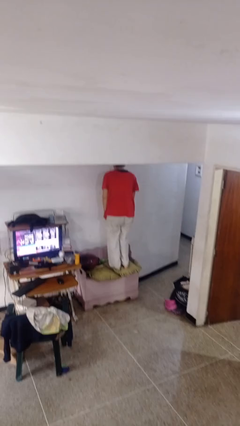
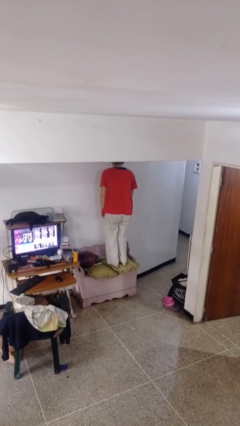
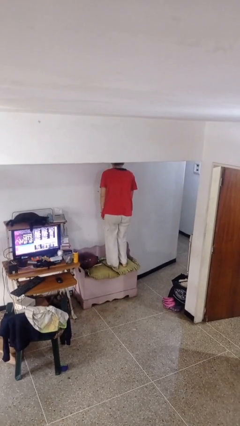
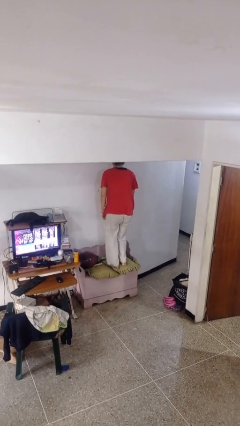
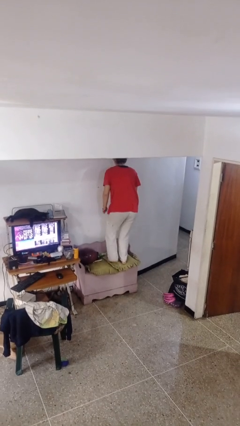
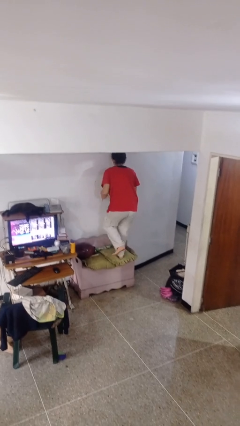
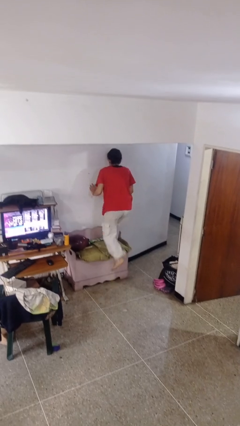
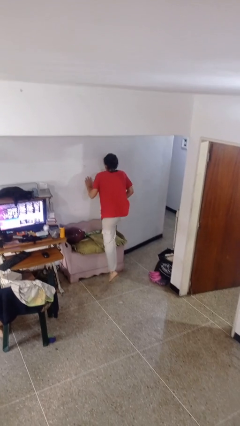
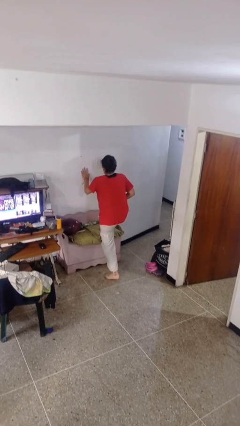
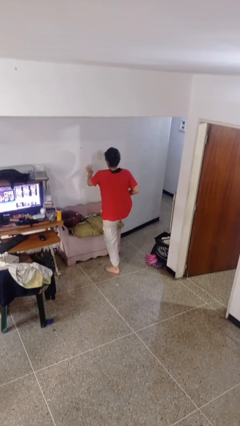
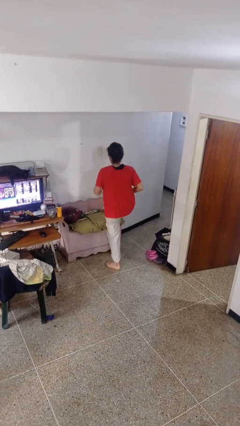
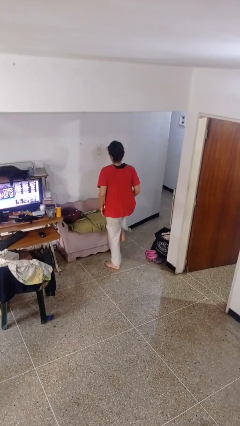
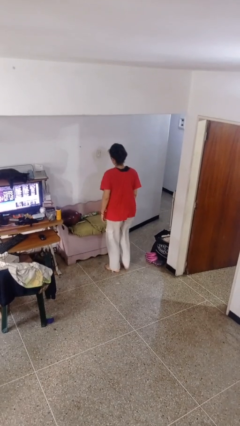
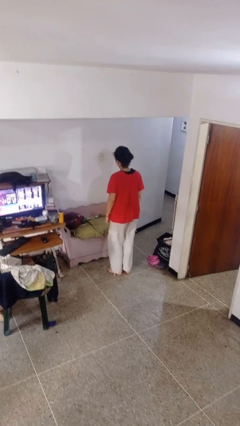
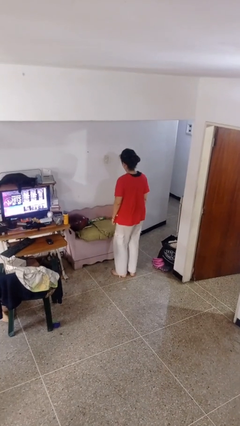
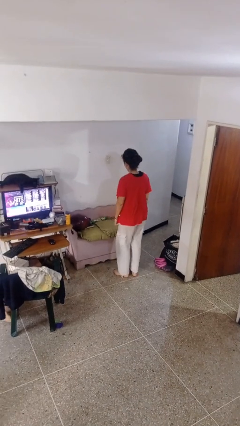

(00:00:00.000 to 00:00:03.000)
person climbs off couch

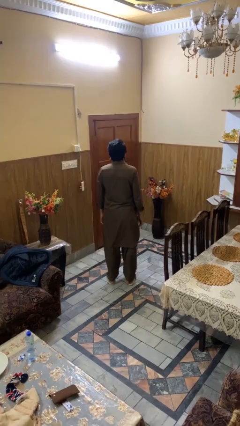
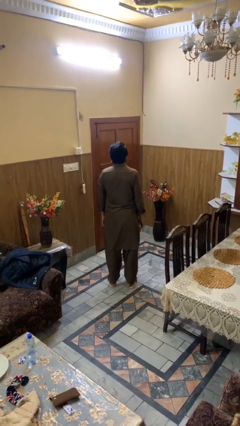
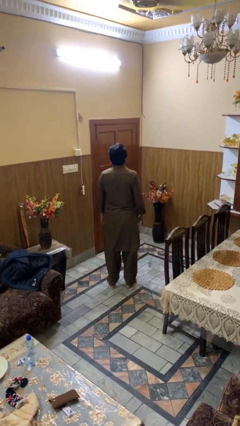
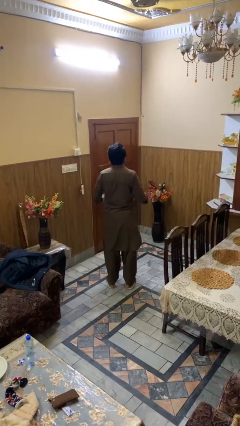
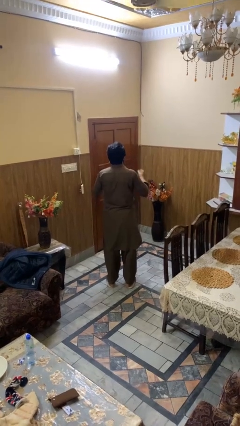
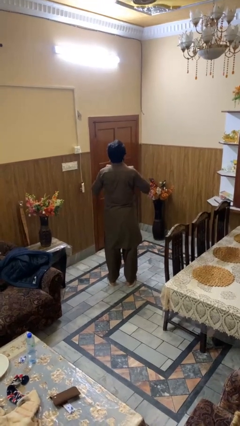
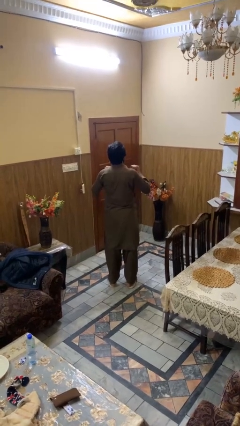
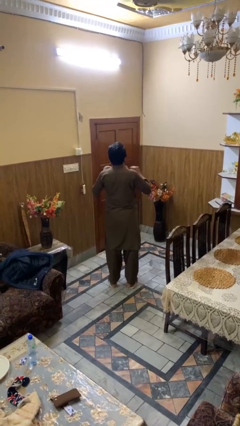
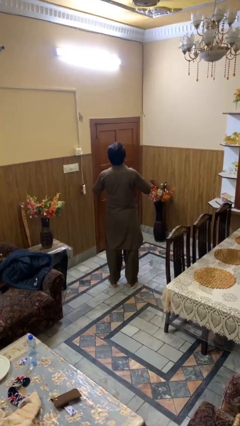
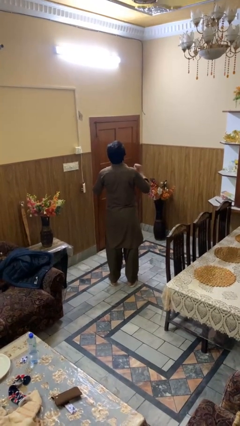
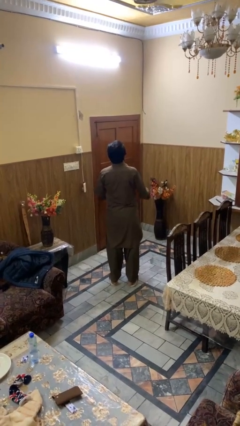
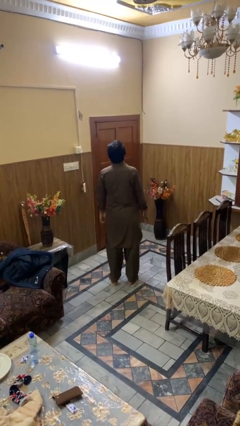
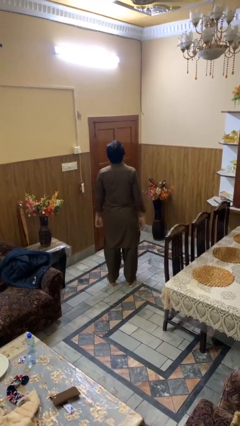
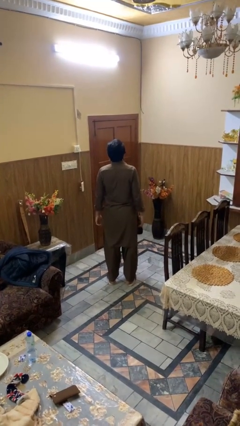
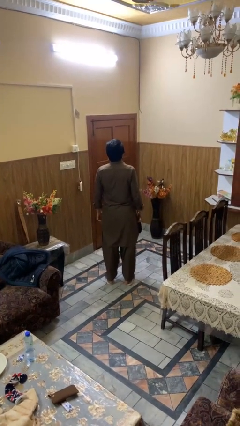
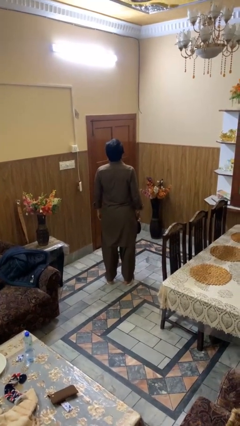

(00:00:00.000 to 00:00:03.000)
person drums on chest

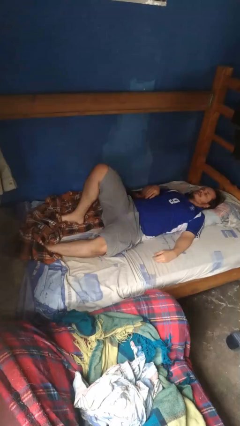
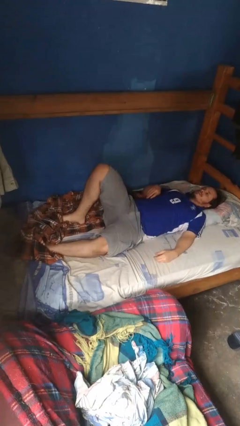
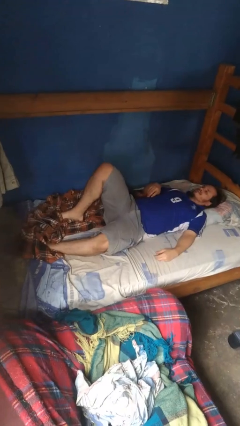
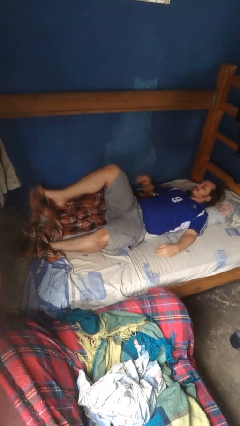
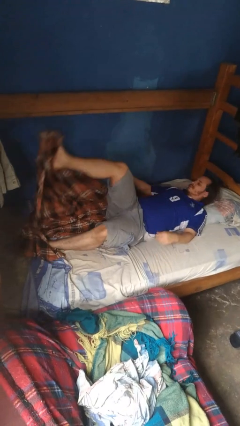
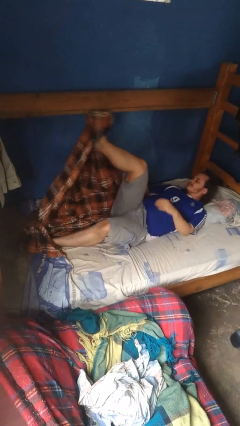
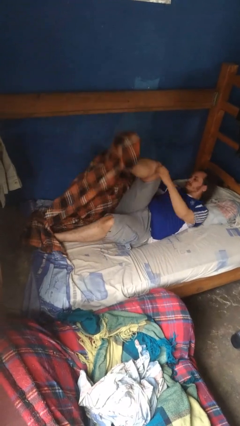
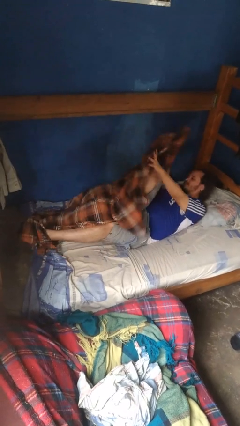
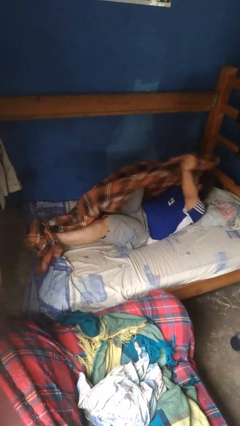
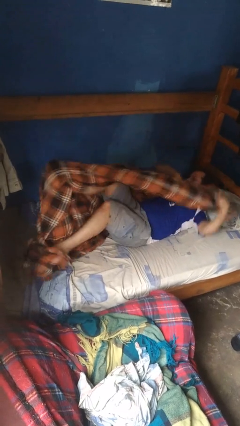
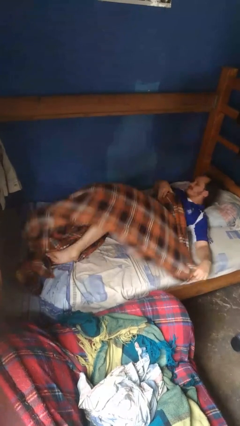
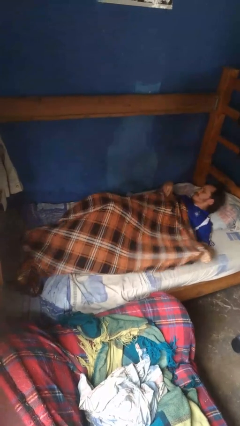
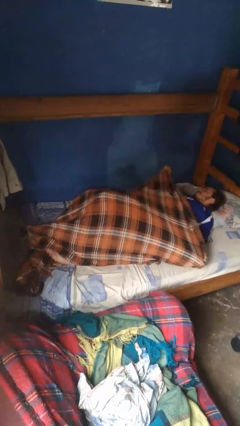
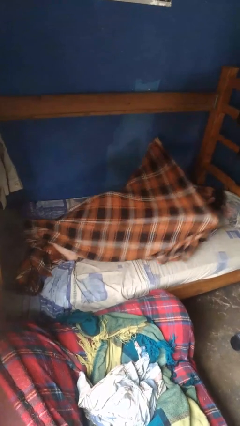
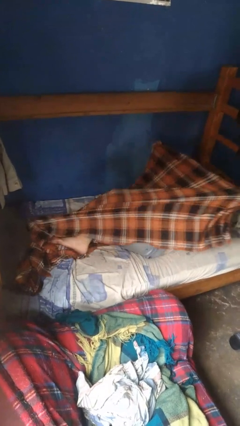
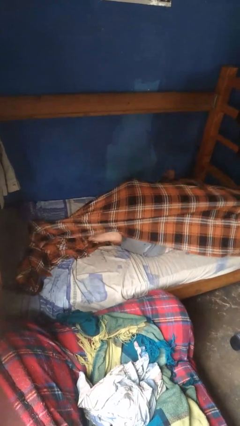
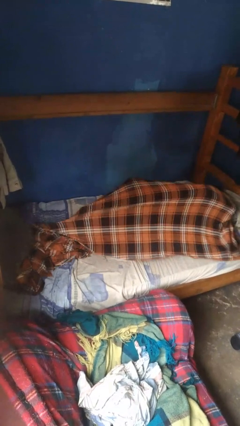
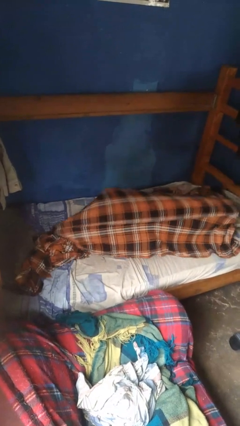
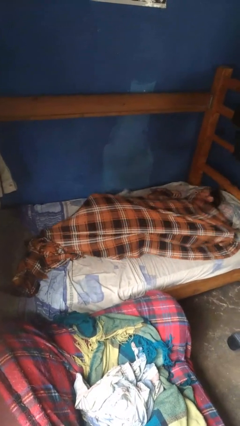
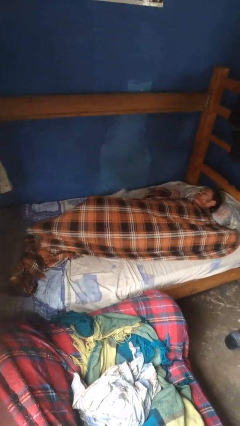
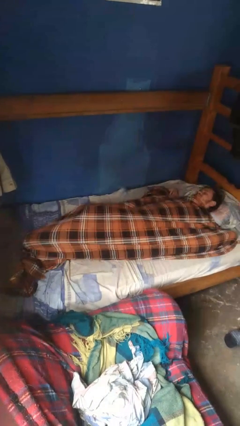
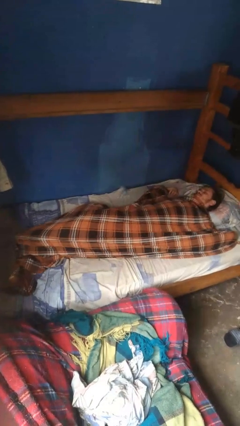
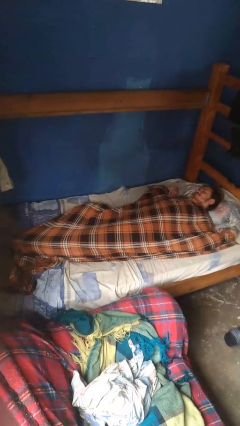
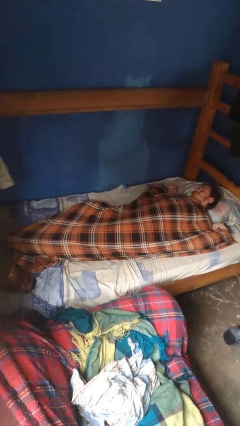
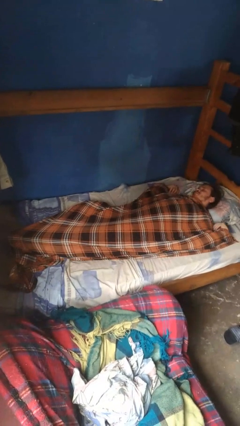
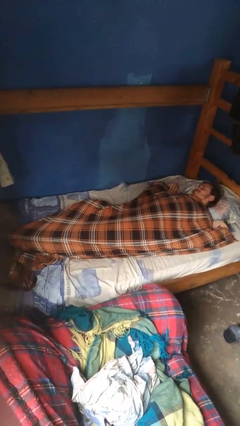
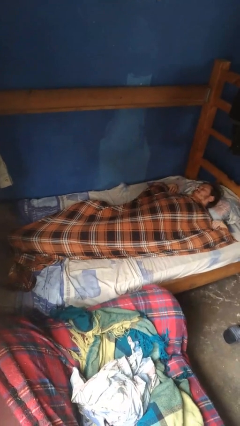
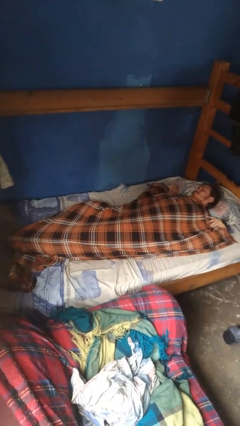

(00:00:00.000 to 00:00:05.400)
person covers with bedsheets

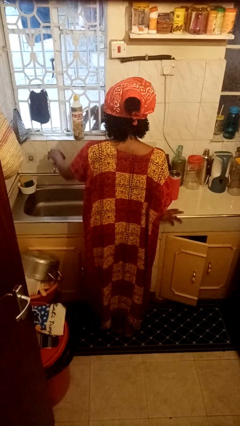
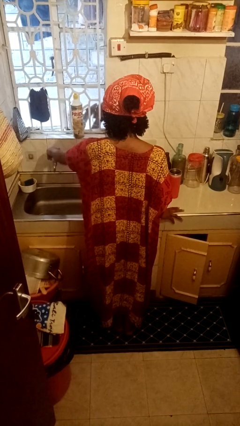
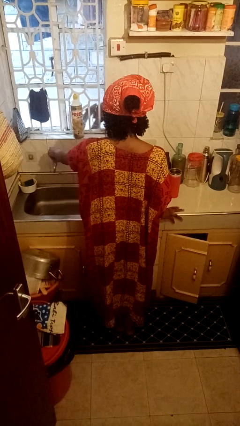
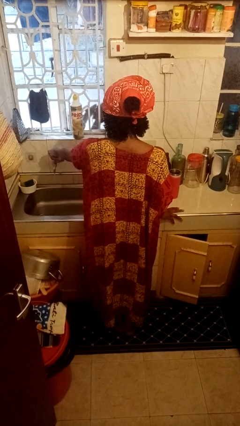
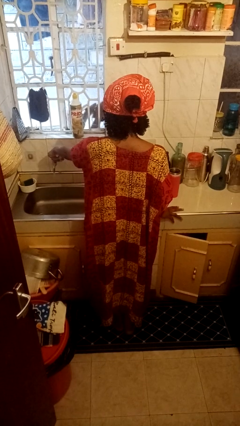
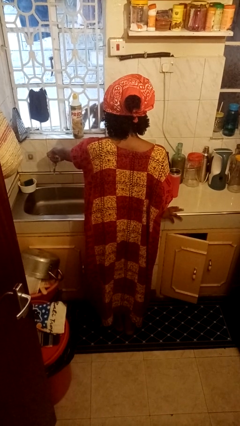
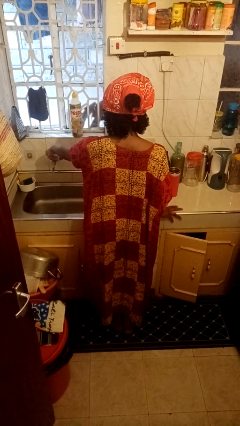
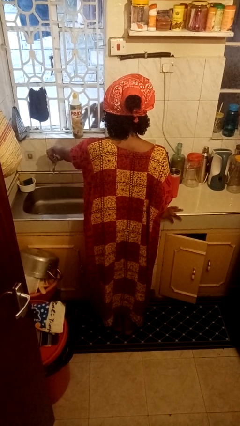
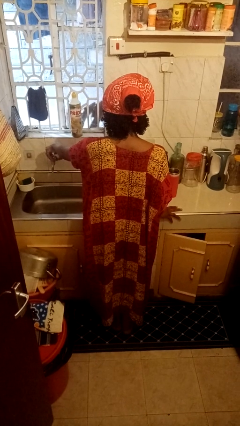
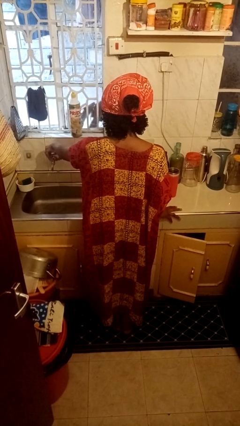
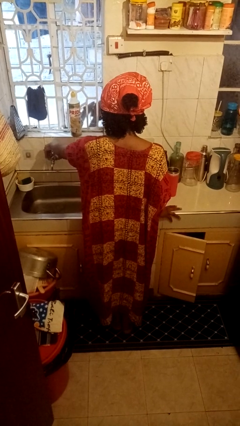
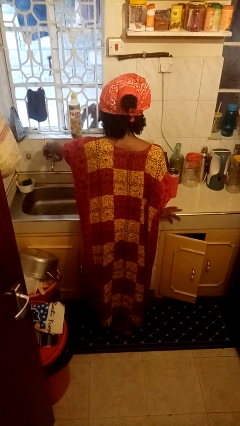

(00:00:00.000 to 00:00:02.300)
person turns on faucet

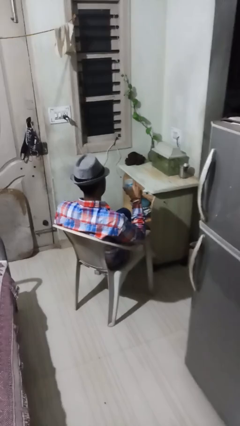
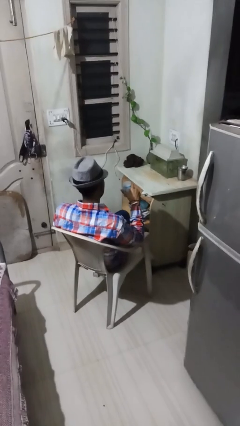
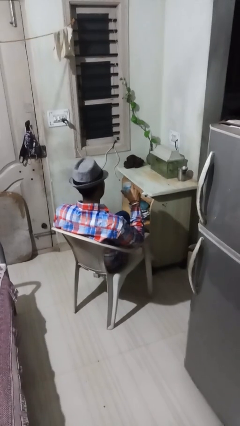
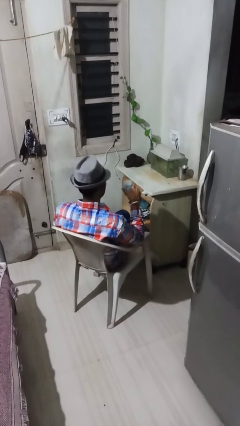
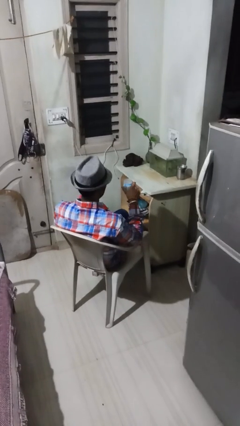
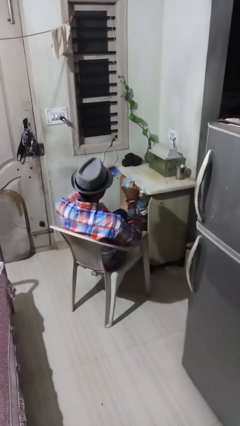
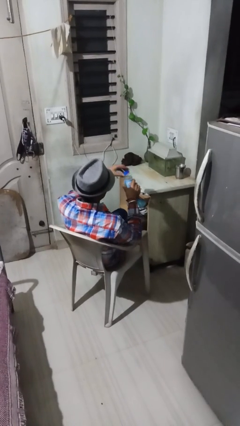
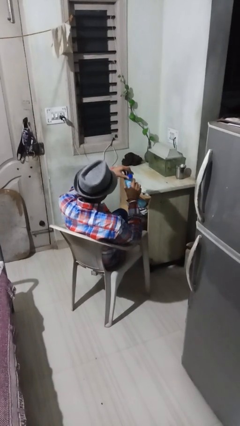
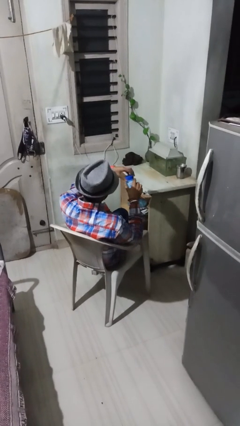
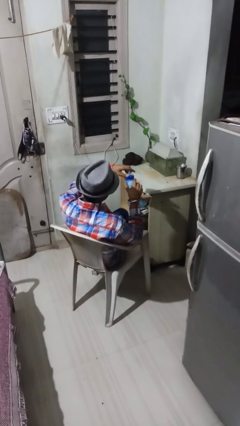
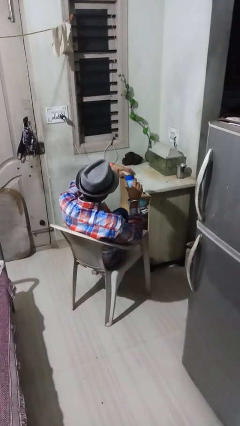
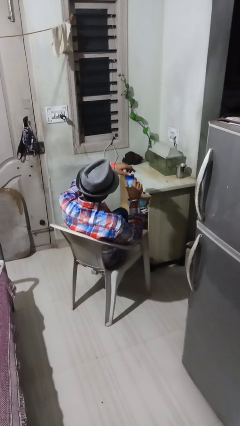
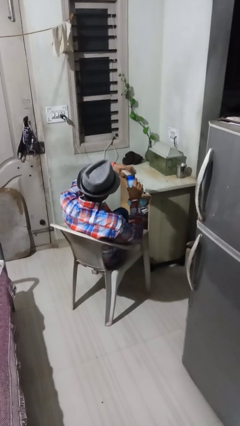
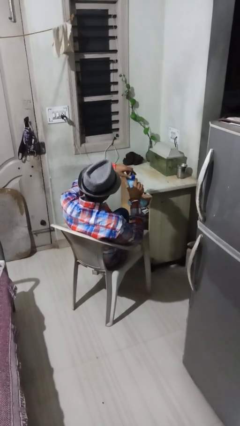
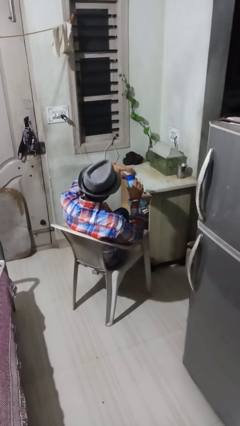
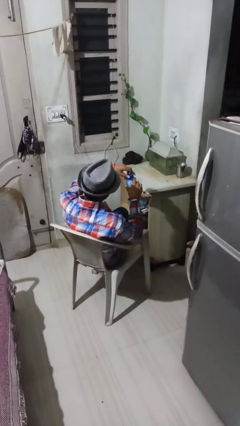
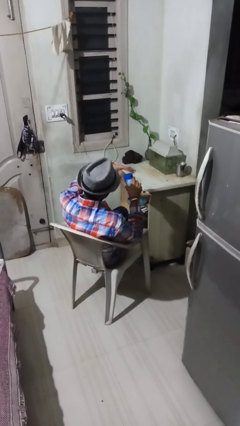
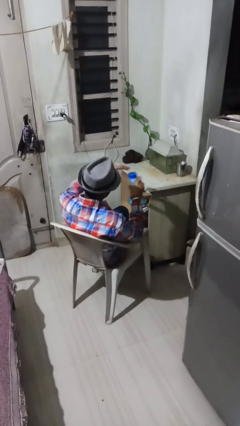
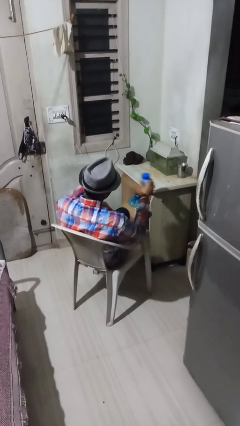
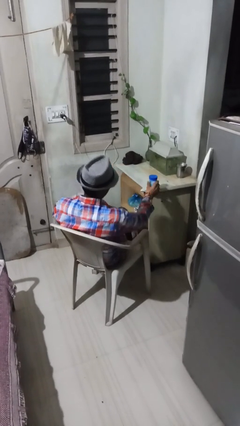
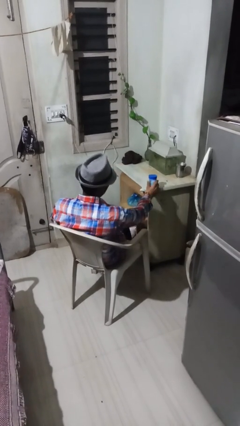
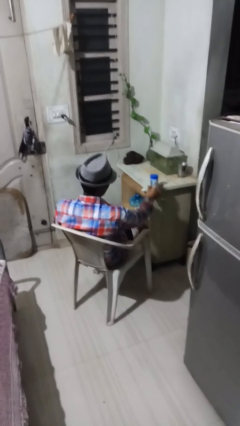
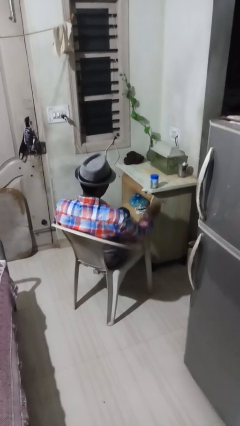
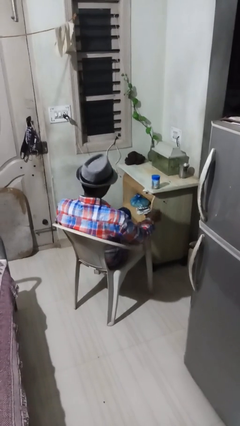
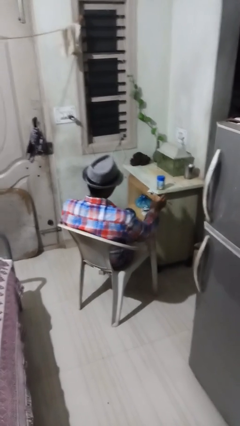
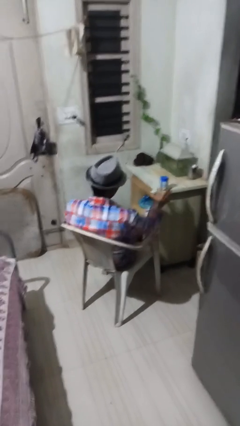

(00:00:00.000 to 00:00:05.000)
person closes jar
